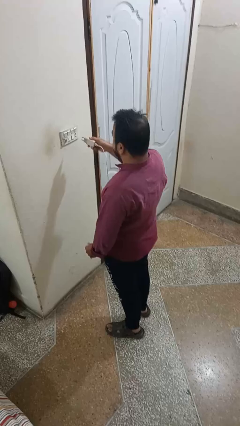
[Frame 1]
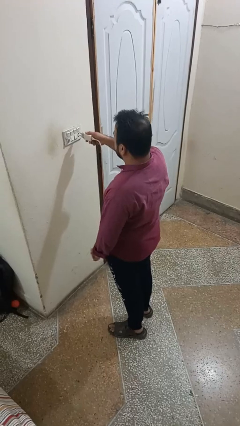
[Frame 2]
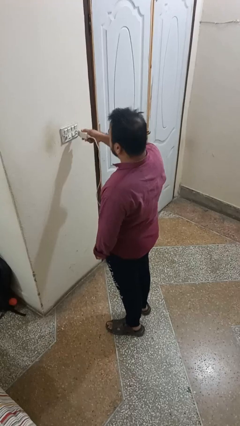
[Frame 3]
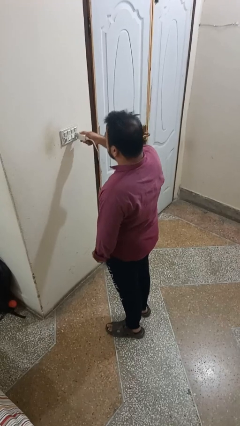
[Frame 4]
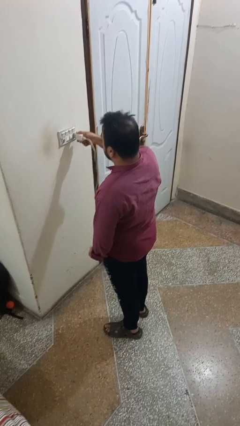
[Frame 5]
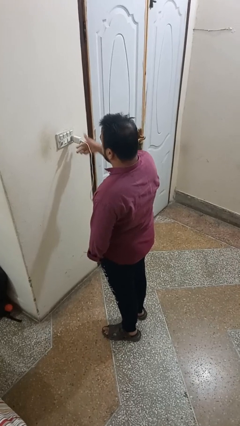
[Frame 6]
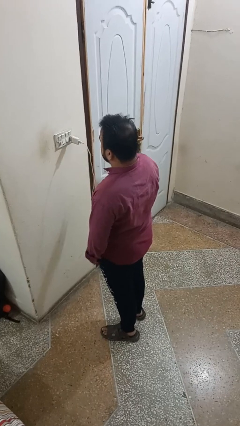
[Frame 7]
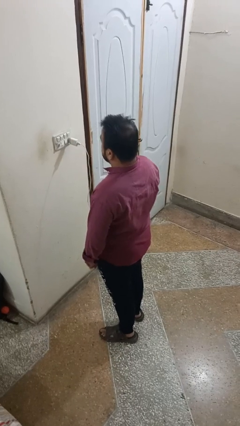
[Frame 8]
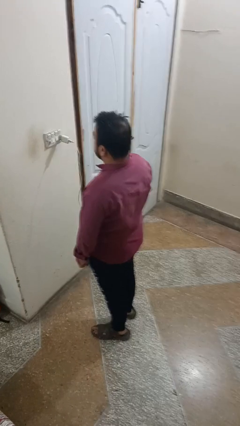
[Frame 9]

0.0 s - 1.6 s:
person plugs into electrical socket

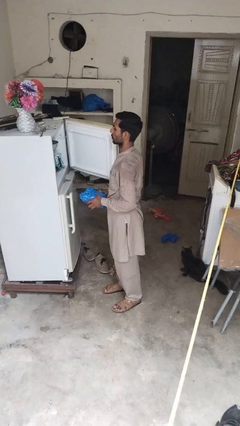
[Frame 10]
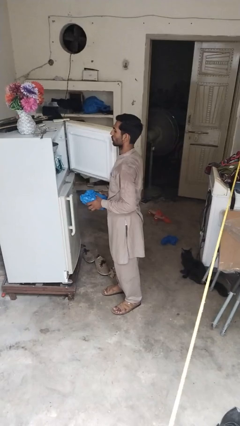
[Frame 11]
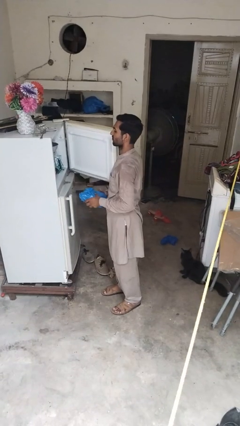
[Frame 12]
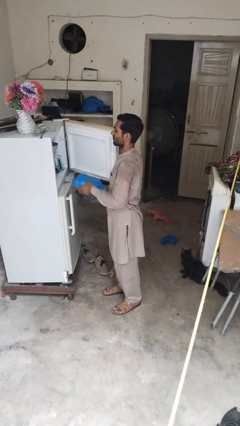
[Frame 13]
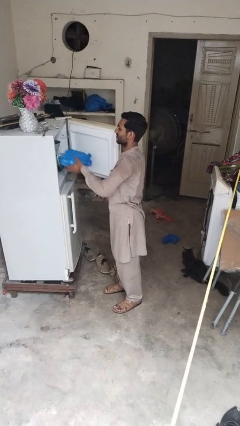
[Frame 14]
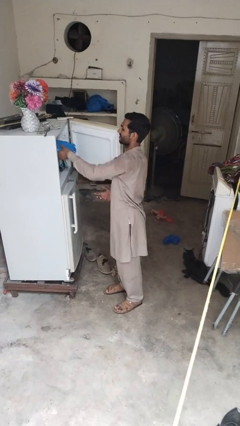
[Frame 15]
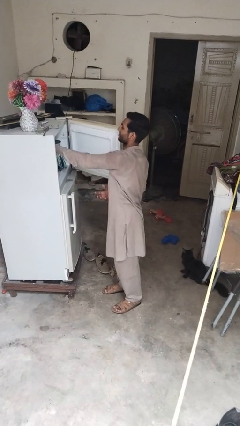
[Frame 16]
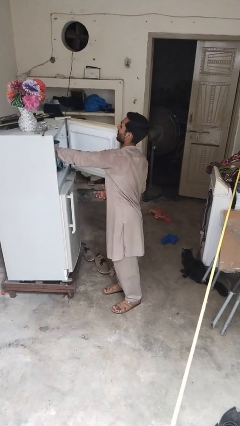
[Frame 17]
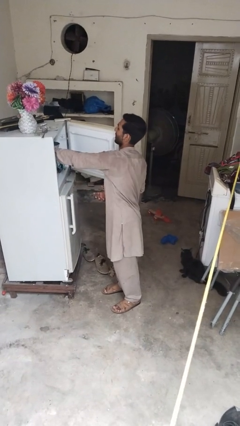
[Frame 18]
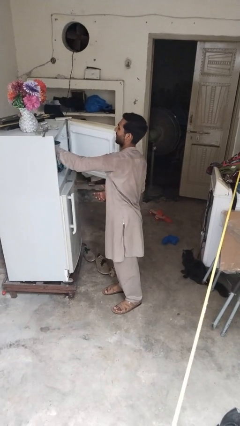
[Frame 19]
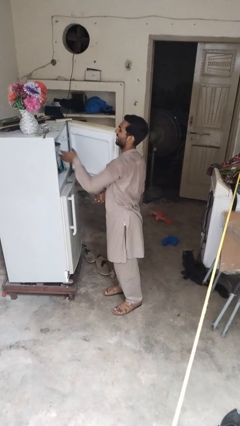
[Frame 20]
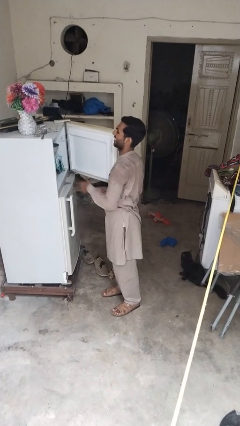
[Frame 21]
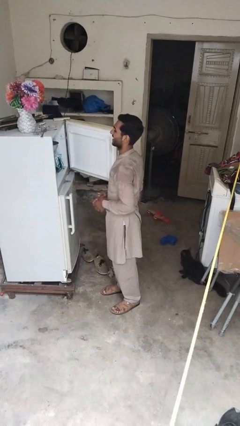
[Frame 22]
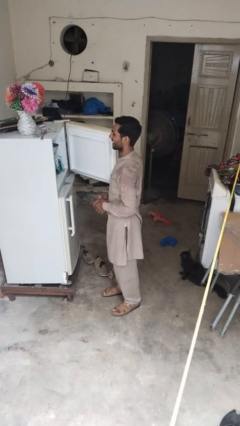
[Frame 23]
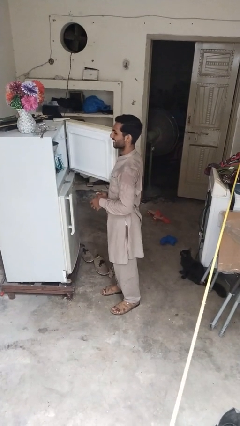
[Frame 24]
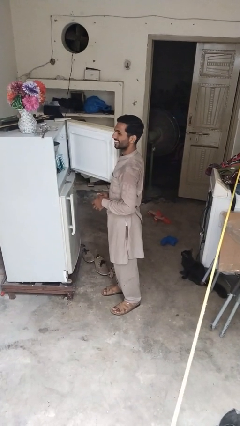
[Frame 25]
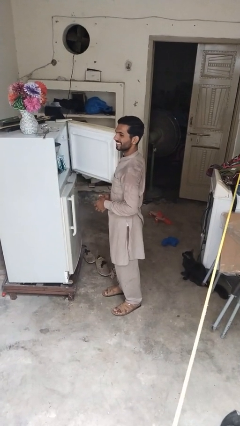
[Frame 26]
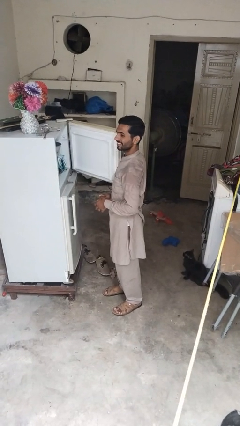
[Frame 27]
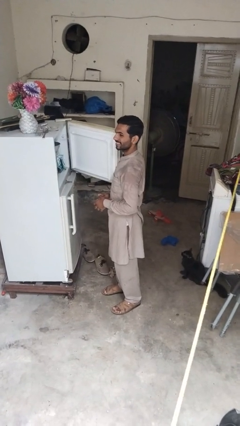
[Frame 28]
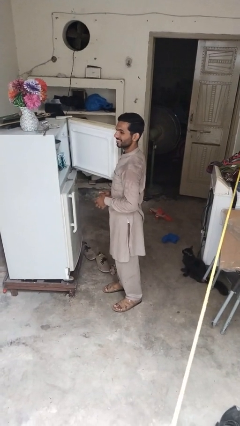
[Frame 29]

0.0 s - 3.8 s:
person loads groceries into refrigerator

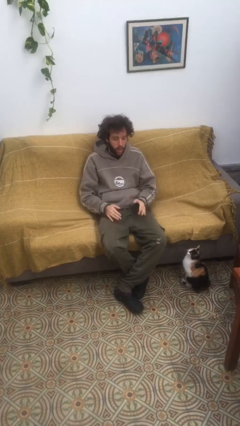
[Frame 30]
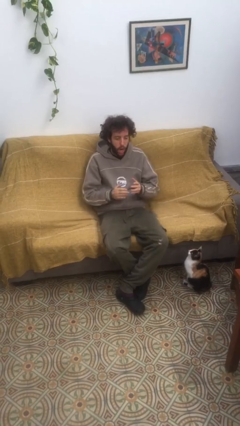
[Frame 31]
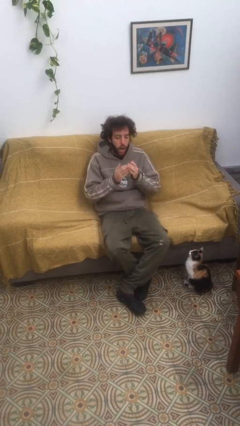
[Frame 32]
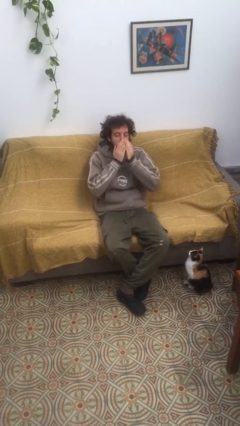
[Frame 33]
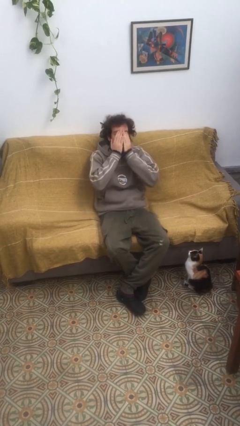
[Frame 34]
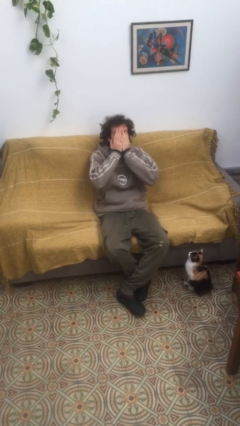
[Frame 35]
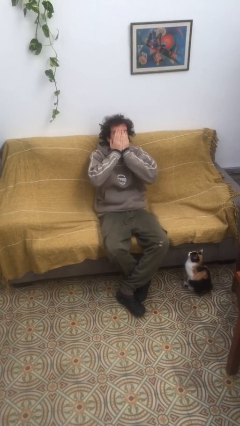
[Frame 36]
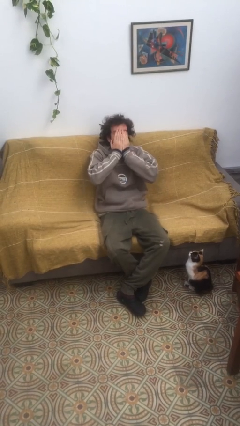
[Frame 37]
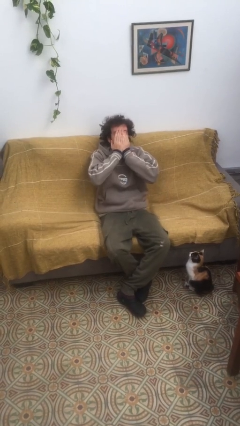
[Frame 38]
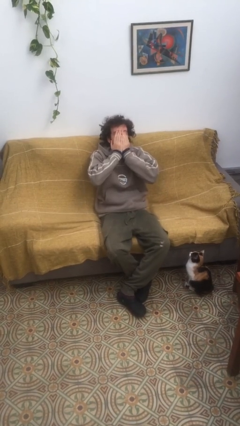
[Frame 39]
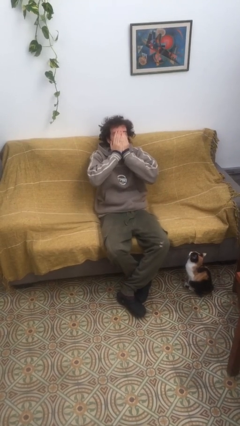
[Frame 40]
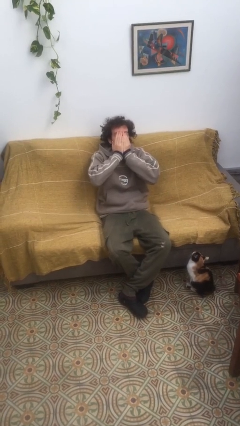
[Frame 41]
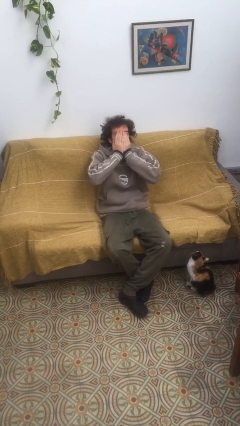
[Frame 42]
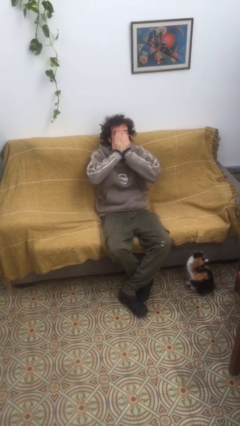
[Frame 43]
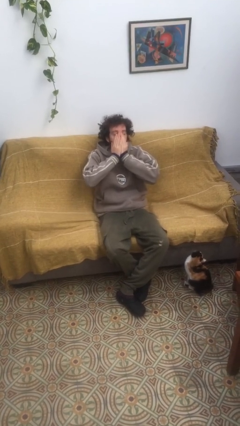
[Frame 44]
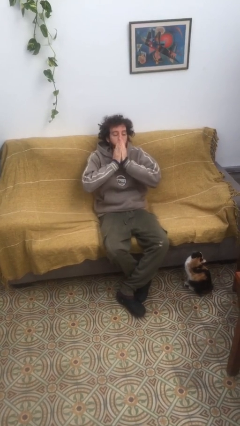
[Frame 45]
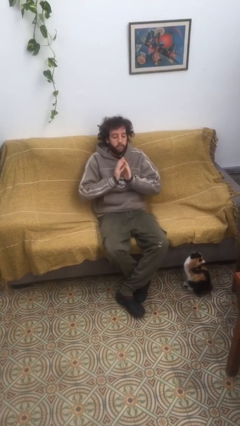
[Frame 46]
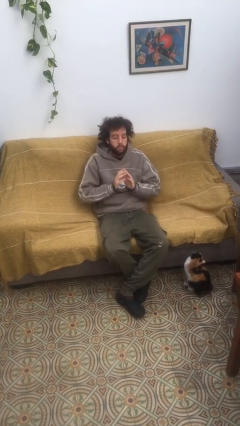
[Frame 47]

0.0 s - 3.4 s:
person yawns

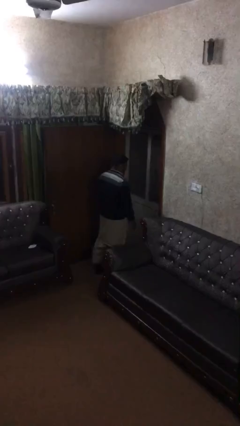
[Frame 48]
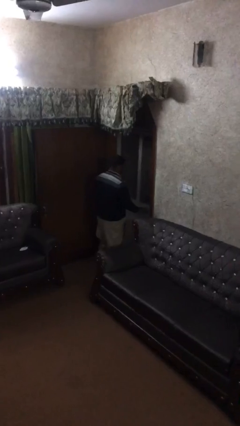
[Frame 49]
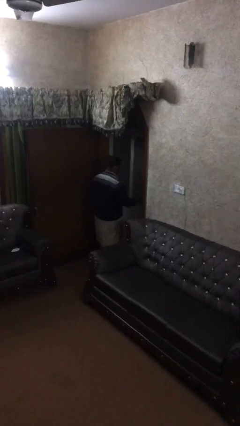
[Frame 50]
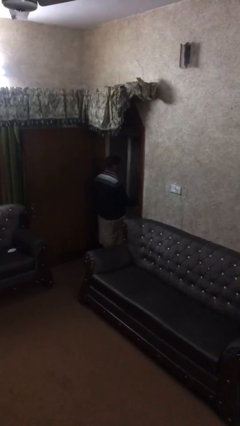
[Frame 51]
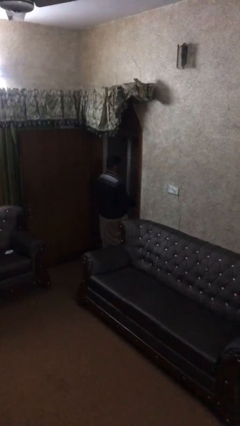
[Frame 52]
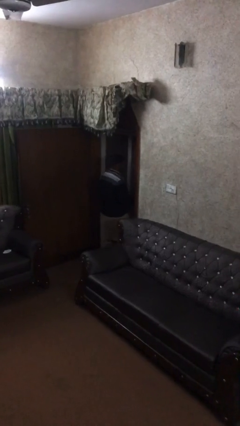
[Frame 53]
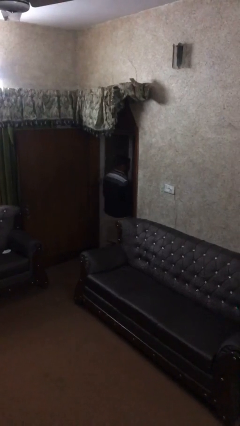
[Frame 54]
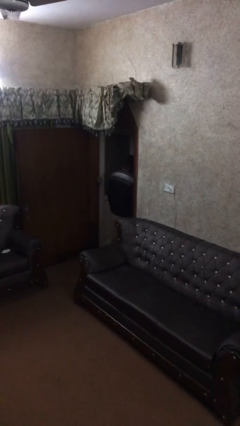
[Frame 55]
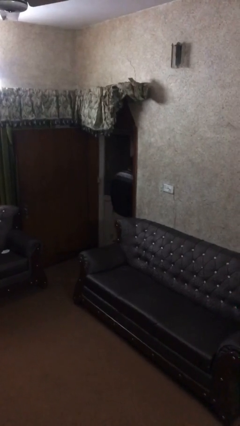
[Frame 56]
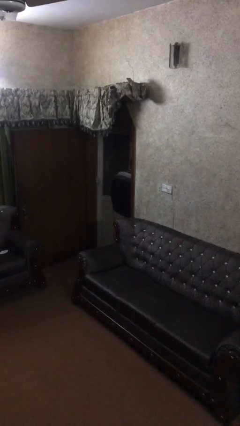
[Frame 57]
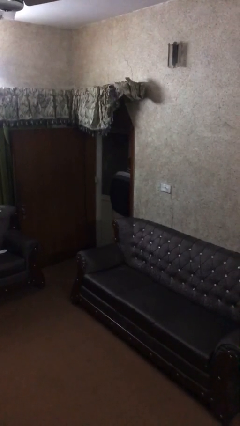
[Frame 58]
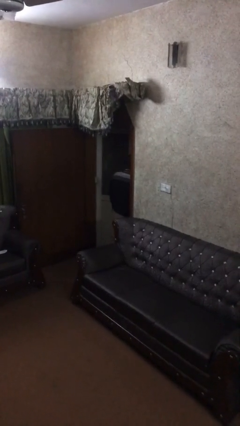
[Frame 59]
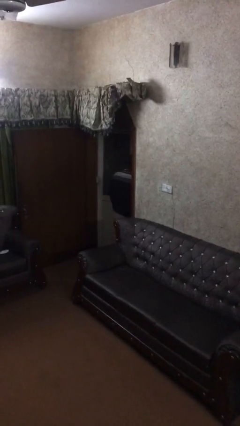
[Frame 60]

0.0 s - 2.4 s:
person opens facility door

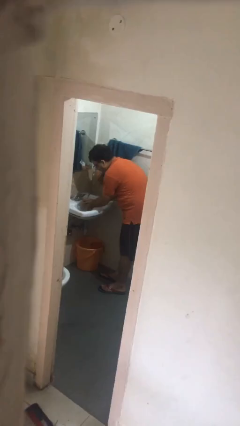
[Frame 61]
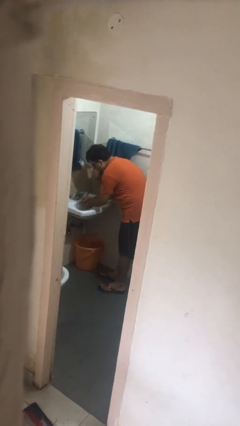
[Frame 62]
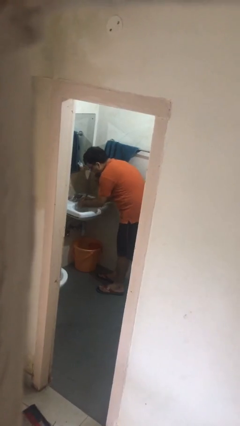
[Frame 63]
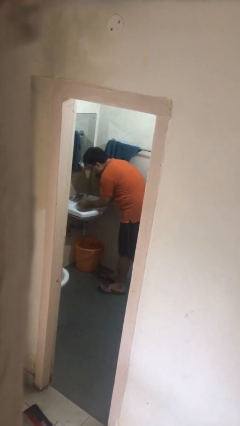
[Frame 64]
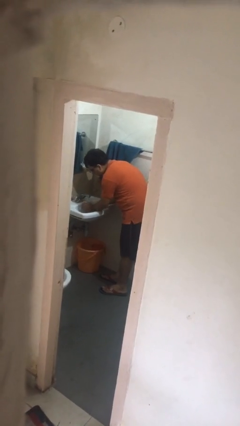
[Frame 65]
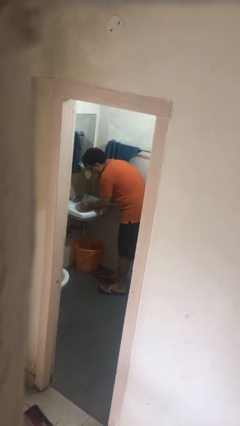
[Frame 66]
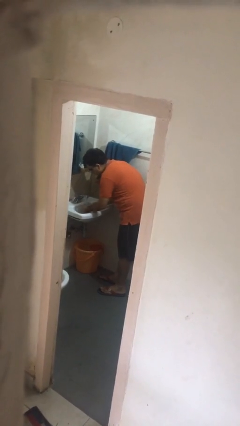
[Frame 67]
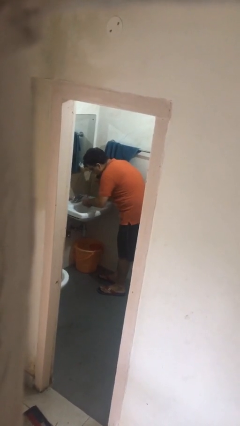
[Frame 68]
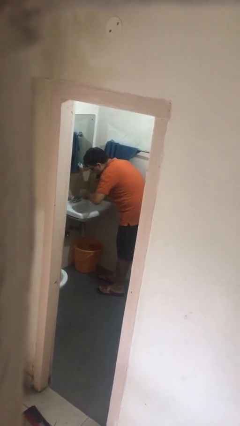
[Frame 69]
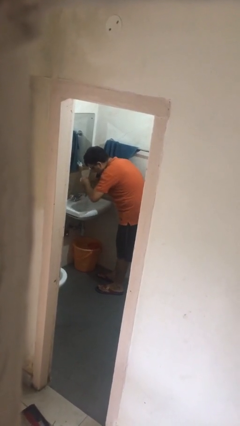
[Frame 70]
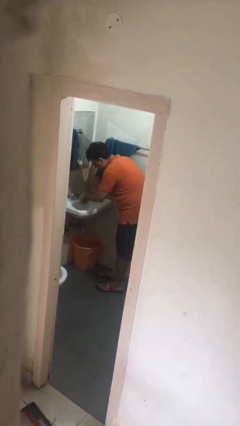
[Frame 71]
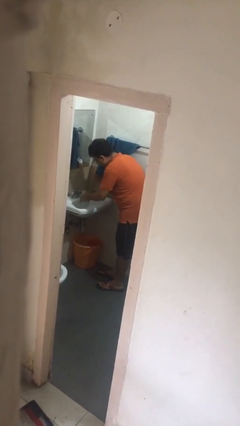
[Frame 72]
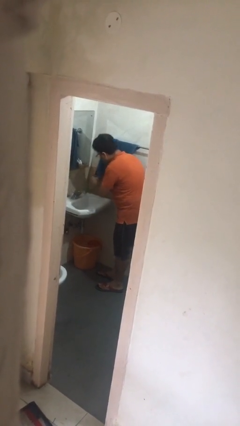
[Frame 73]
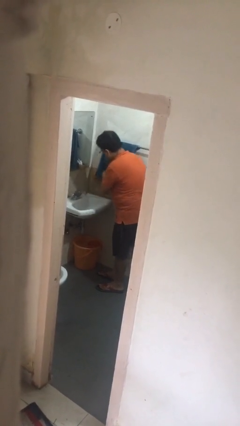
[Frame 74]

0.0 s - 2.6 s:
person washes hands

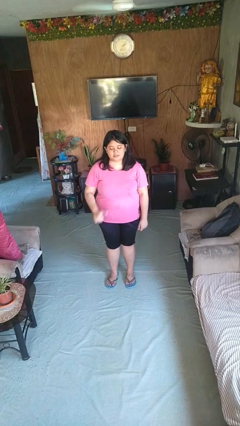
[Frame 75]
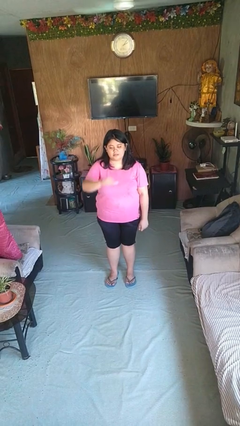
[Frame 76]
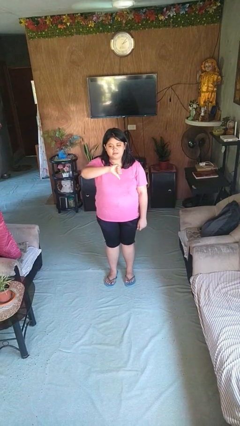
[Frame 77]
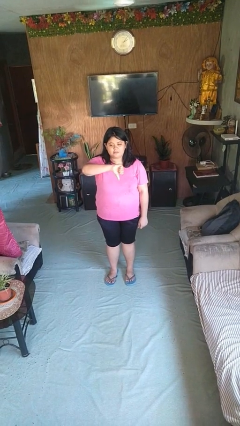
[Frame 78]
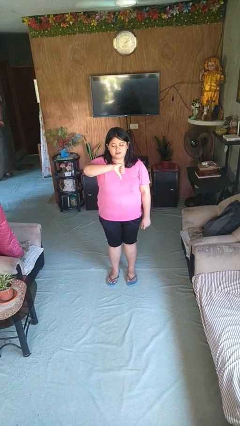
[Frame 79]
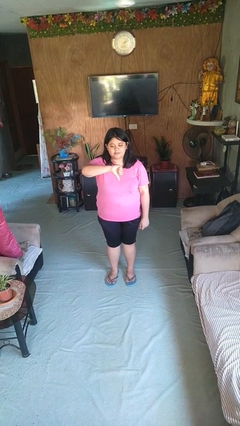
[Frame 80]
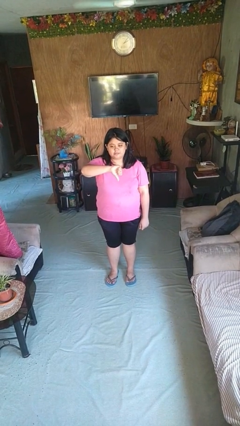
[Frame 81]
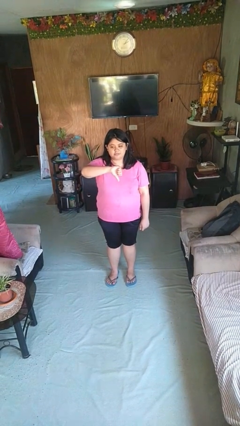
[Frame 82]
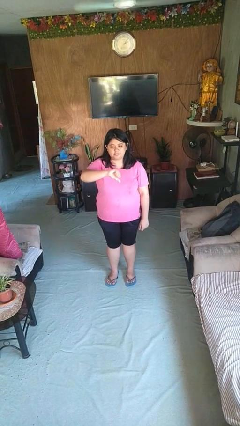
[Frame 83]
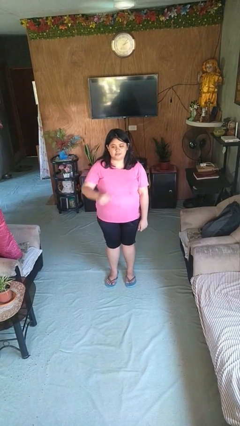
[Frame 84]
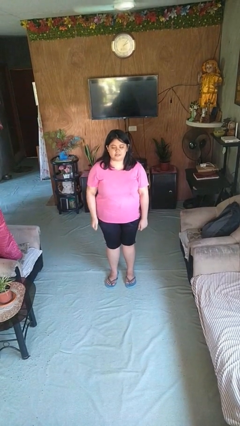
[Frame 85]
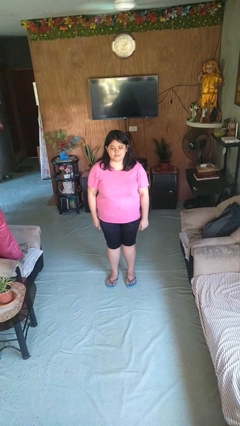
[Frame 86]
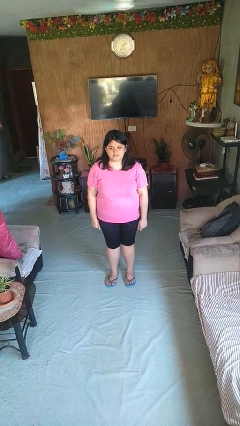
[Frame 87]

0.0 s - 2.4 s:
person gestures thumbs down

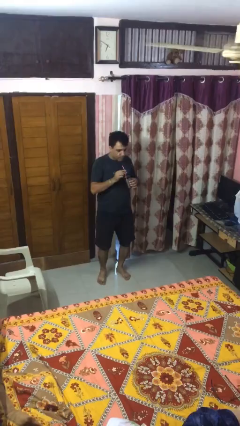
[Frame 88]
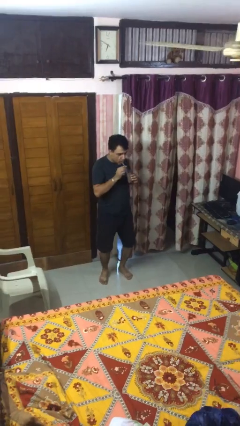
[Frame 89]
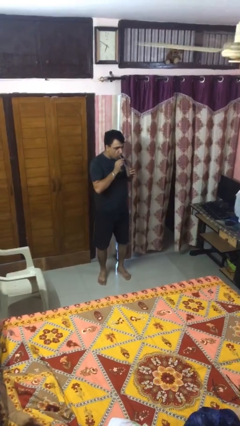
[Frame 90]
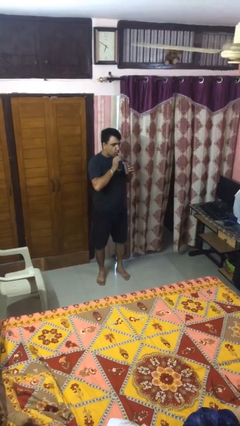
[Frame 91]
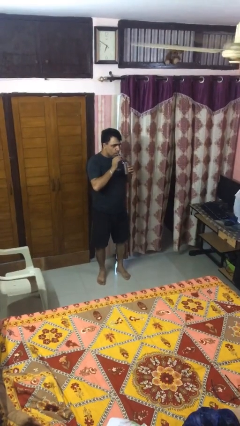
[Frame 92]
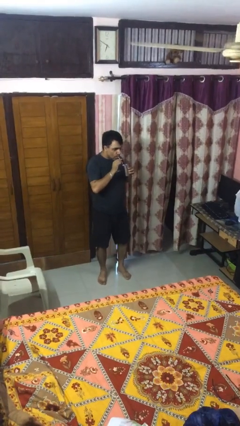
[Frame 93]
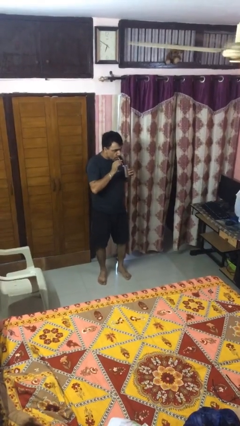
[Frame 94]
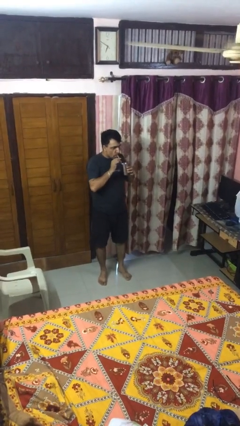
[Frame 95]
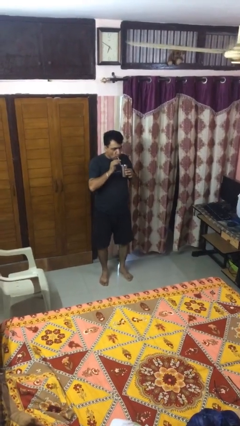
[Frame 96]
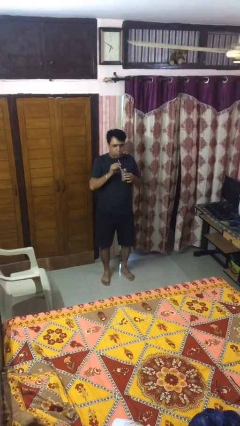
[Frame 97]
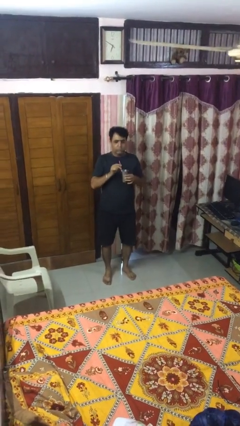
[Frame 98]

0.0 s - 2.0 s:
person drinks from straw
